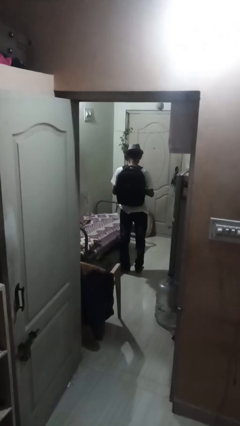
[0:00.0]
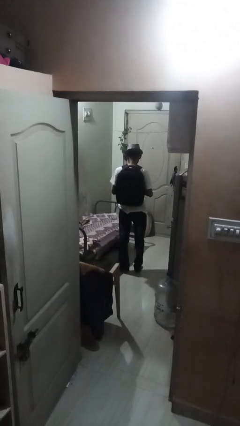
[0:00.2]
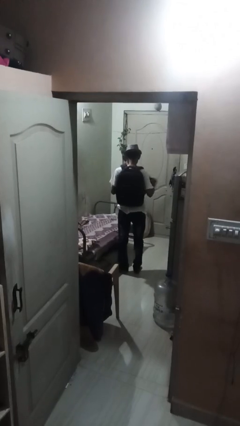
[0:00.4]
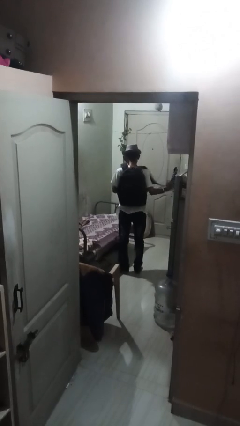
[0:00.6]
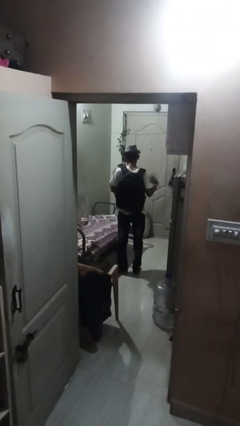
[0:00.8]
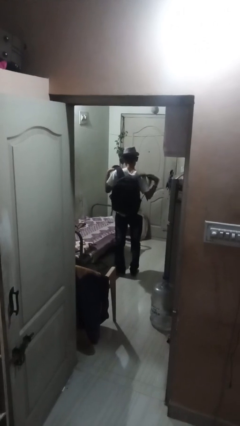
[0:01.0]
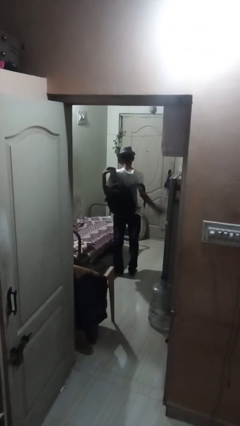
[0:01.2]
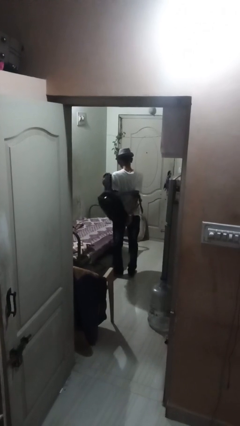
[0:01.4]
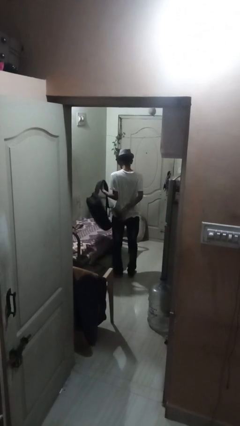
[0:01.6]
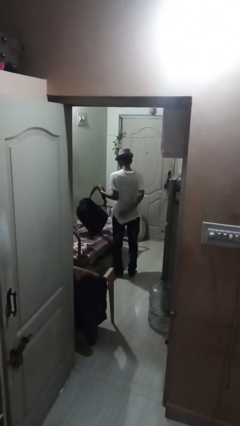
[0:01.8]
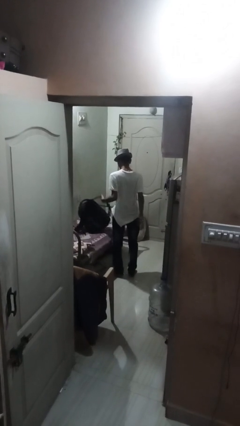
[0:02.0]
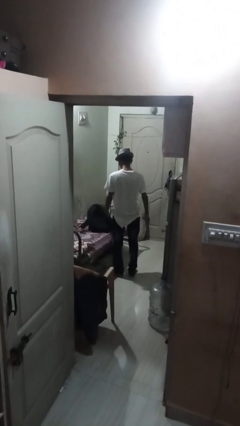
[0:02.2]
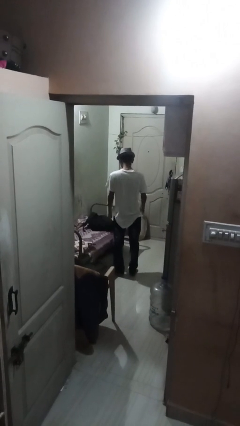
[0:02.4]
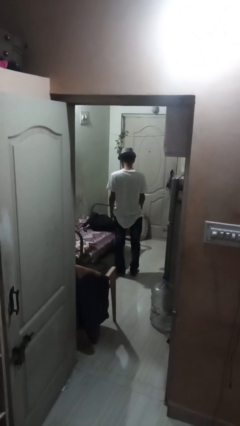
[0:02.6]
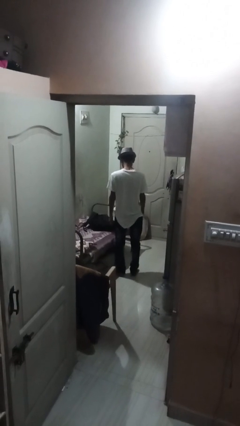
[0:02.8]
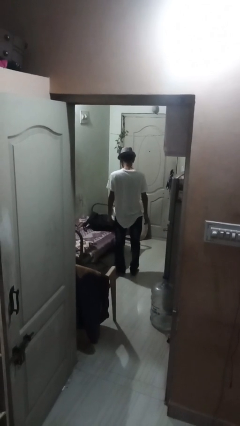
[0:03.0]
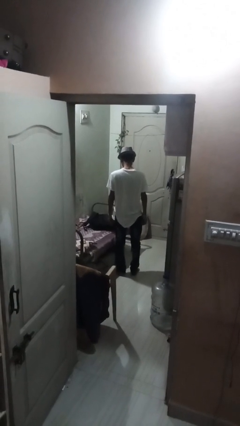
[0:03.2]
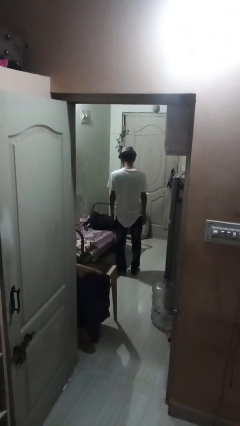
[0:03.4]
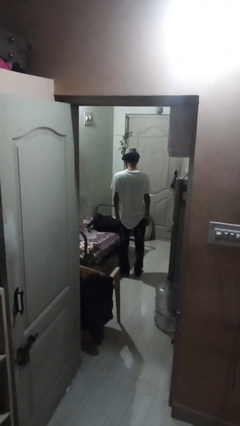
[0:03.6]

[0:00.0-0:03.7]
person takes off backpack

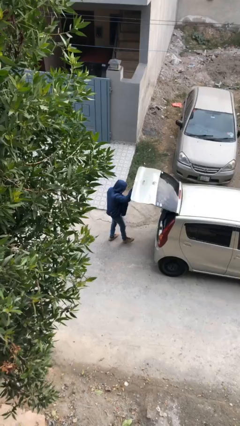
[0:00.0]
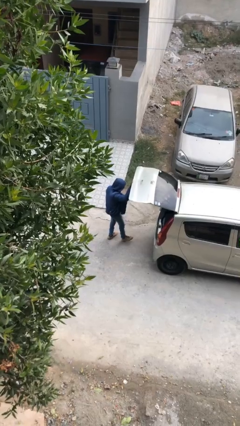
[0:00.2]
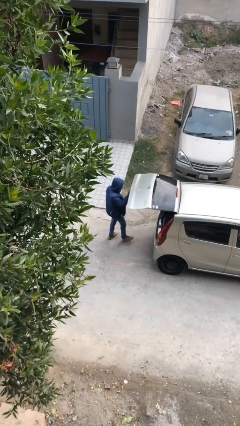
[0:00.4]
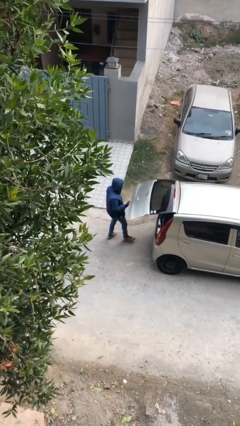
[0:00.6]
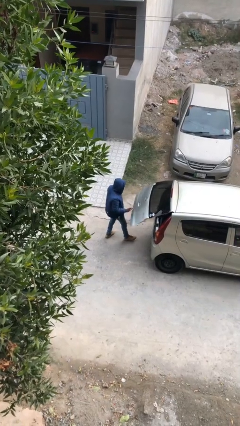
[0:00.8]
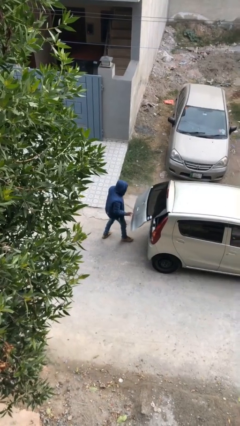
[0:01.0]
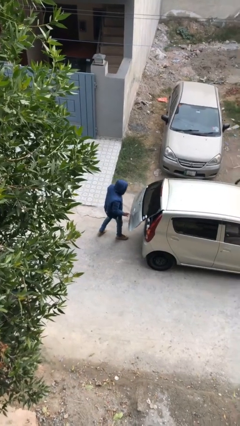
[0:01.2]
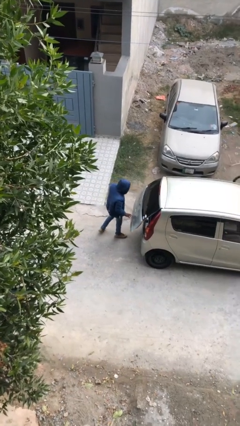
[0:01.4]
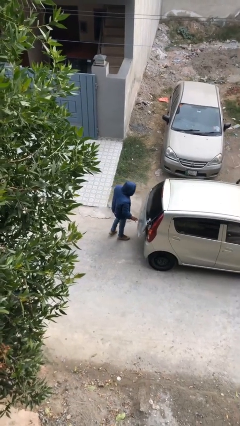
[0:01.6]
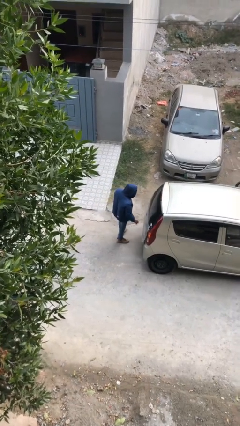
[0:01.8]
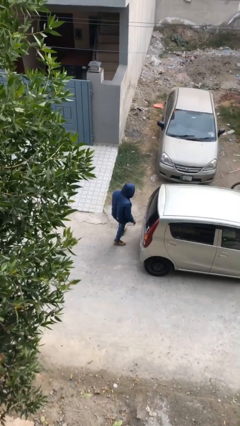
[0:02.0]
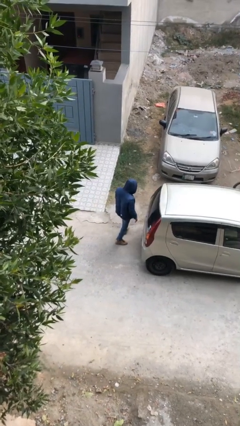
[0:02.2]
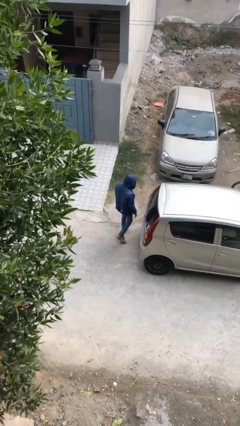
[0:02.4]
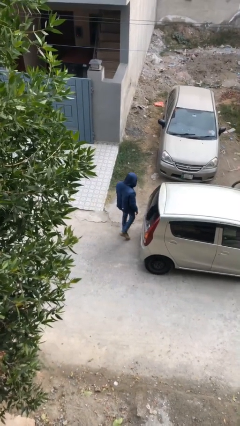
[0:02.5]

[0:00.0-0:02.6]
person closes car trunk

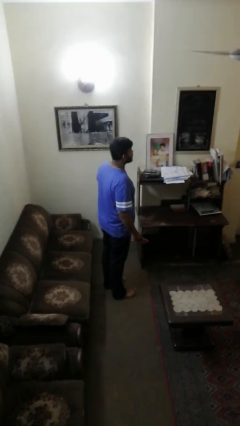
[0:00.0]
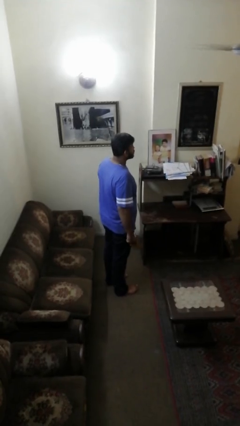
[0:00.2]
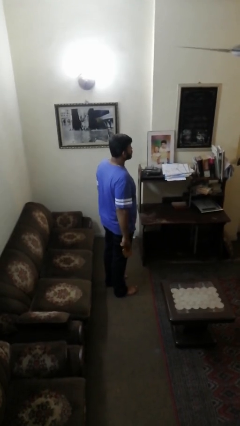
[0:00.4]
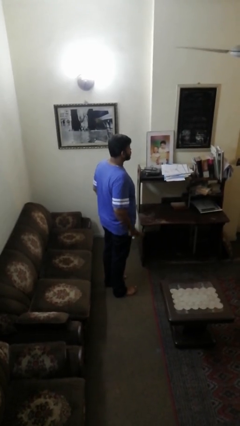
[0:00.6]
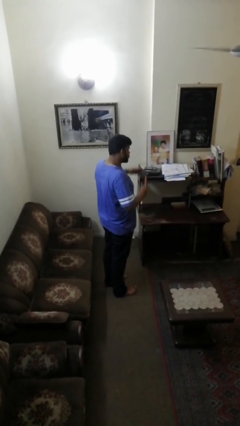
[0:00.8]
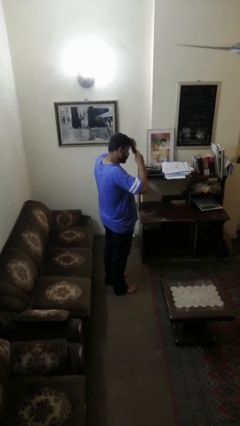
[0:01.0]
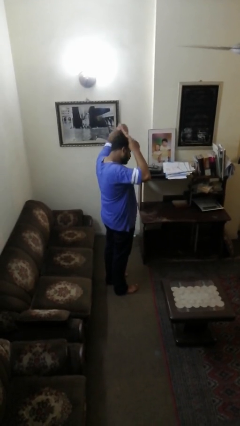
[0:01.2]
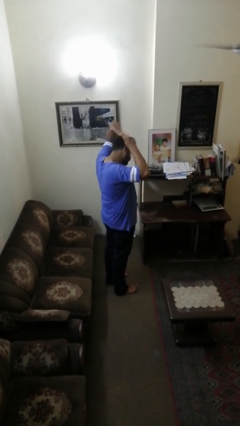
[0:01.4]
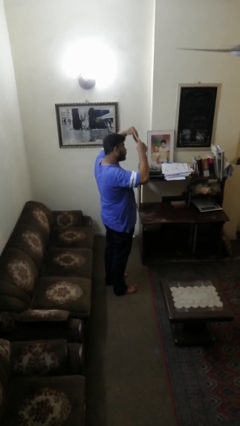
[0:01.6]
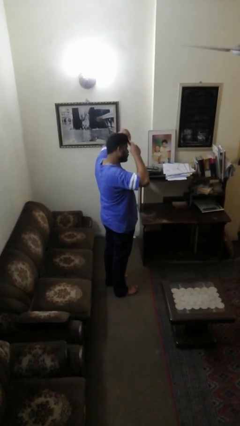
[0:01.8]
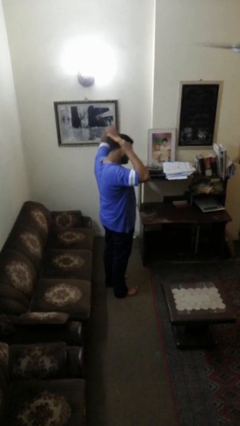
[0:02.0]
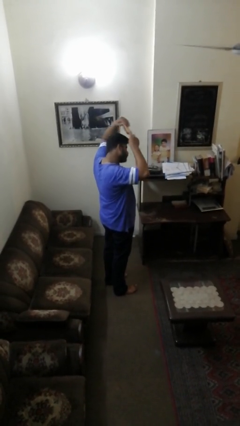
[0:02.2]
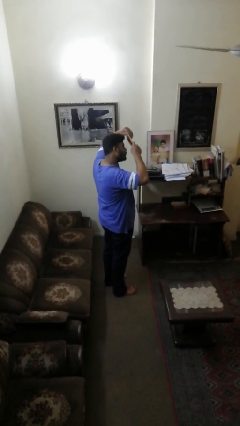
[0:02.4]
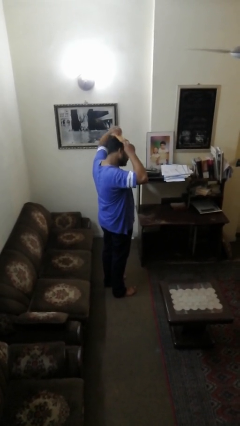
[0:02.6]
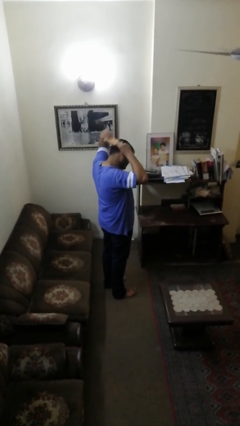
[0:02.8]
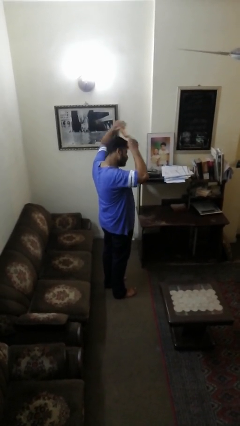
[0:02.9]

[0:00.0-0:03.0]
person brushes hair

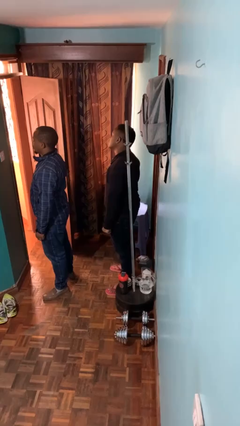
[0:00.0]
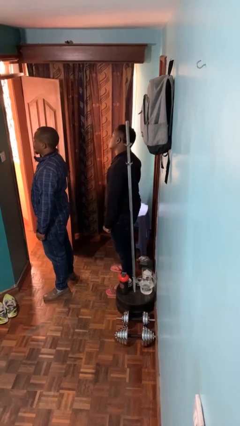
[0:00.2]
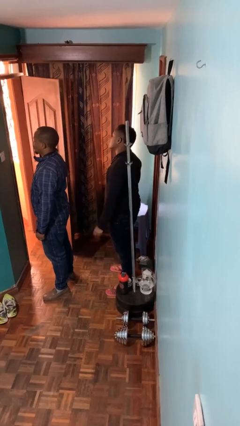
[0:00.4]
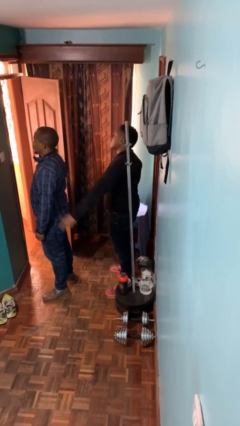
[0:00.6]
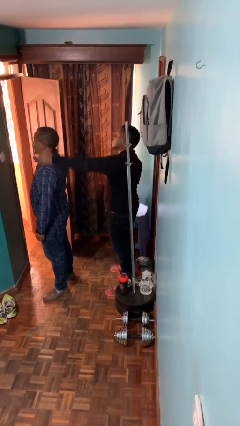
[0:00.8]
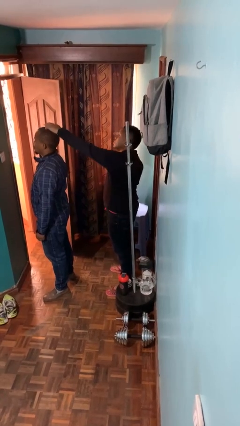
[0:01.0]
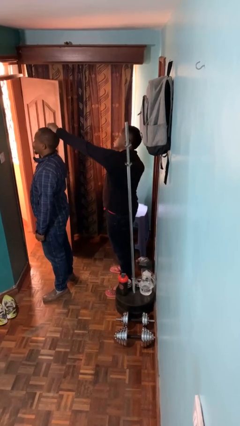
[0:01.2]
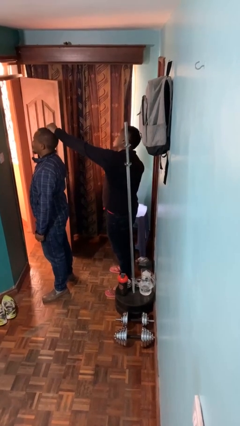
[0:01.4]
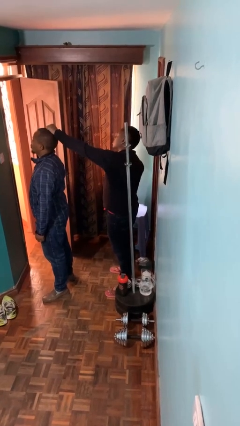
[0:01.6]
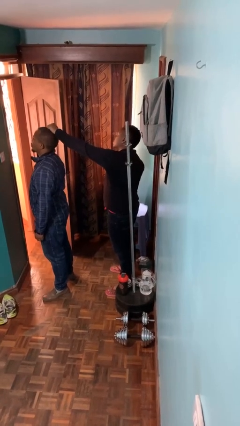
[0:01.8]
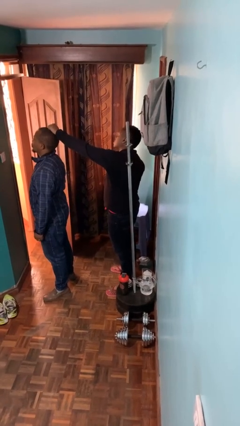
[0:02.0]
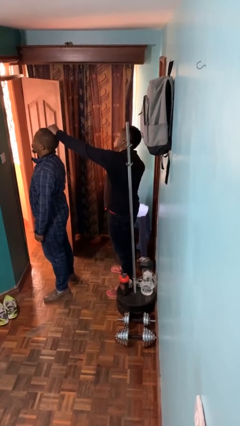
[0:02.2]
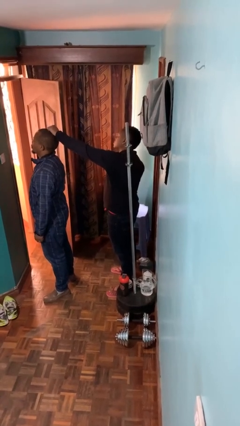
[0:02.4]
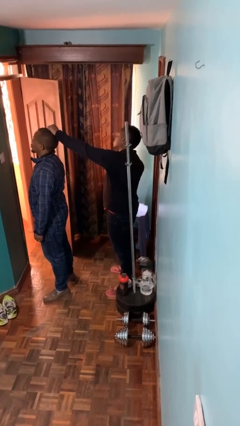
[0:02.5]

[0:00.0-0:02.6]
person grabs person by hair

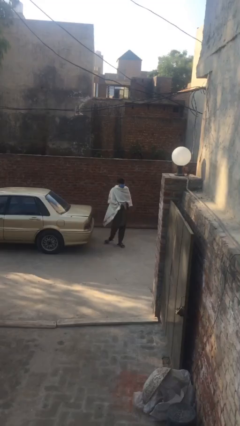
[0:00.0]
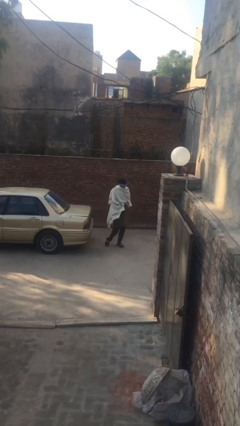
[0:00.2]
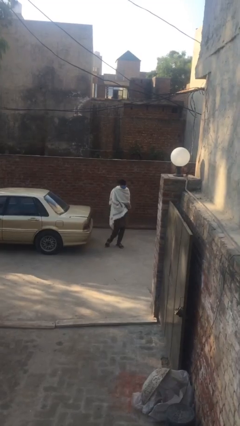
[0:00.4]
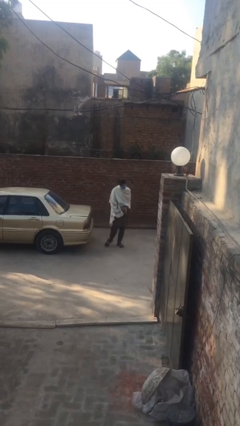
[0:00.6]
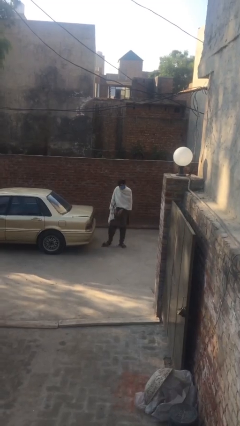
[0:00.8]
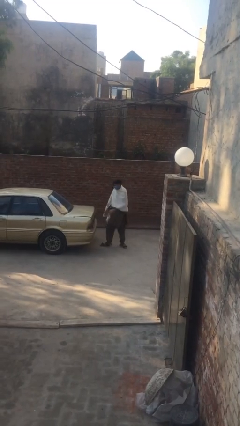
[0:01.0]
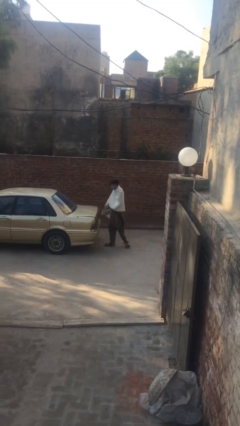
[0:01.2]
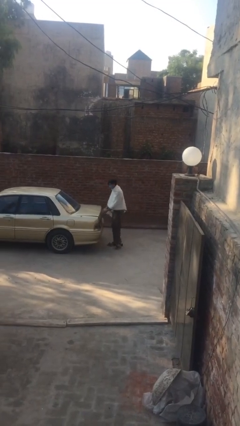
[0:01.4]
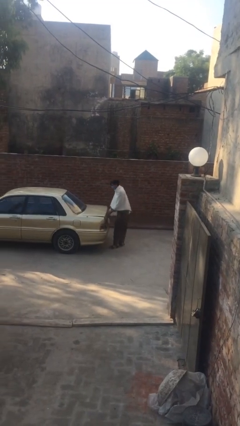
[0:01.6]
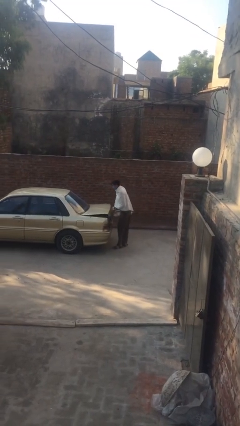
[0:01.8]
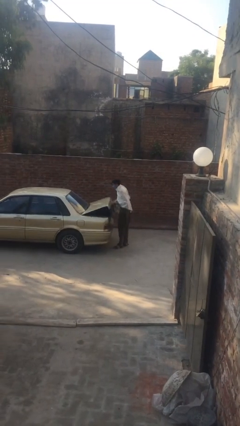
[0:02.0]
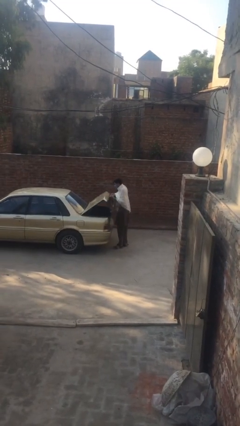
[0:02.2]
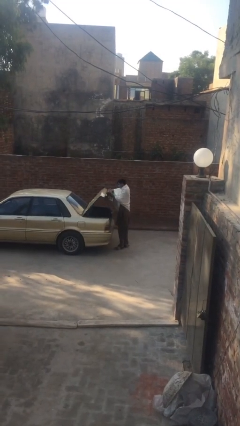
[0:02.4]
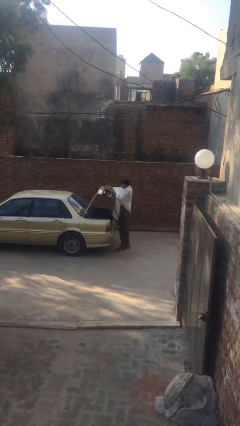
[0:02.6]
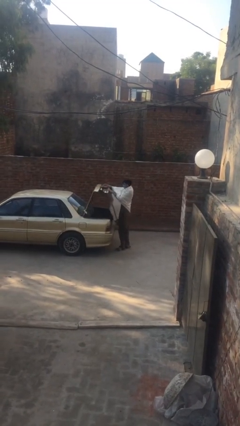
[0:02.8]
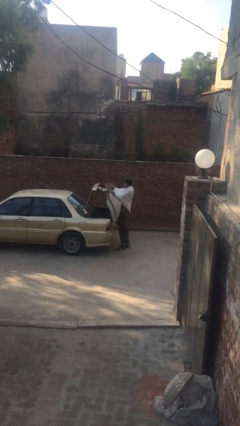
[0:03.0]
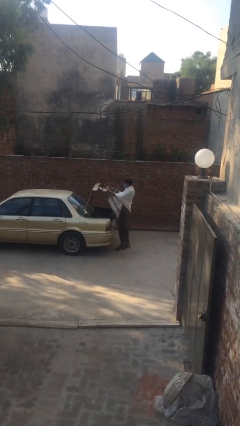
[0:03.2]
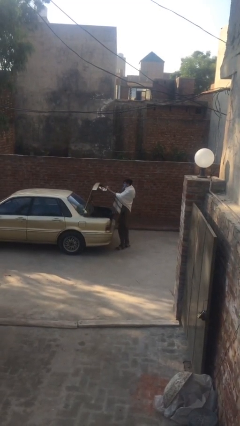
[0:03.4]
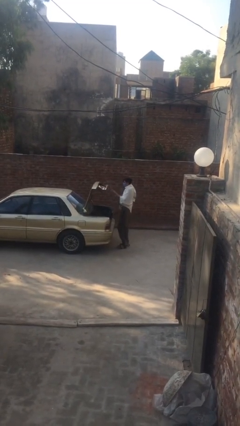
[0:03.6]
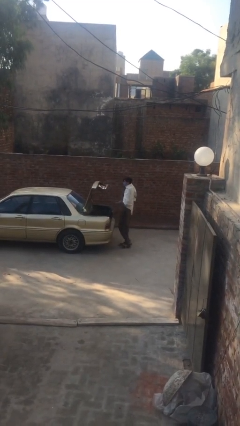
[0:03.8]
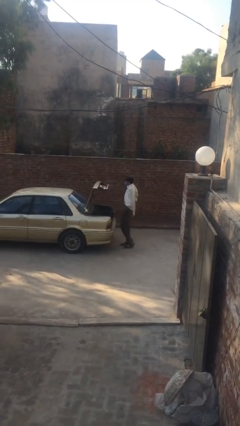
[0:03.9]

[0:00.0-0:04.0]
person opens car trunk

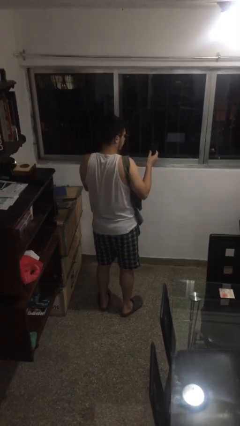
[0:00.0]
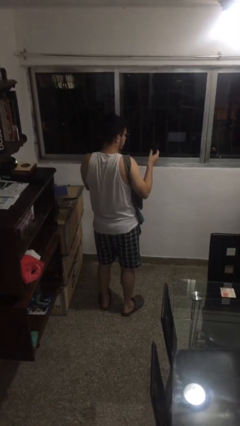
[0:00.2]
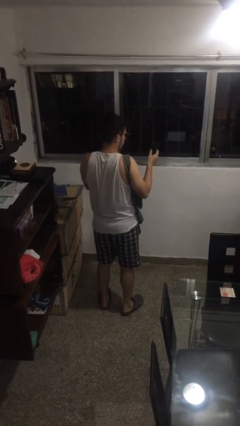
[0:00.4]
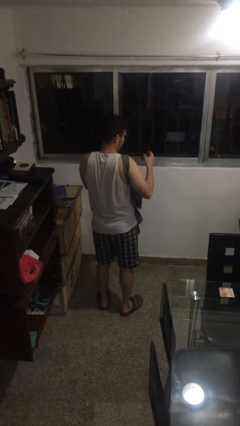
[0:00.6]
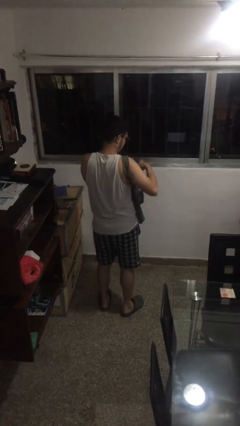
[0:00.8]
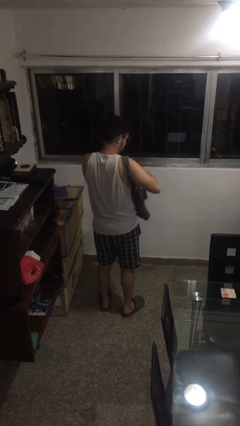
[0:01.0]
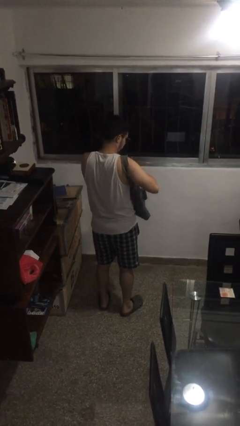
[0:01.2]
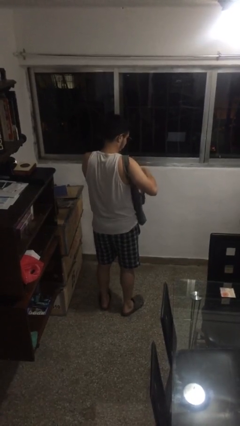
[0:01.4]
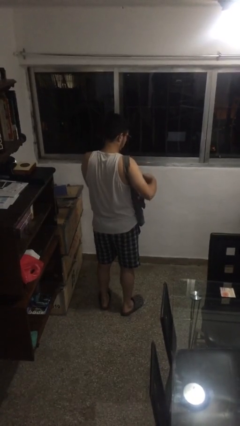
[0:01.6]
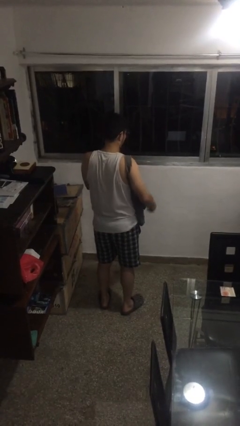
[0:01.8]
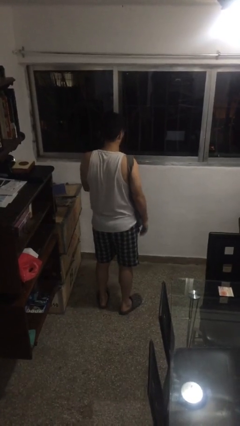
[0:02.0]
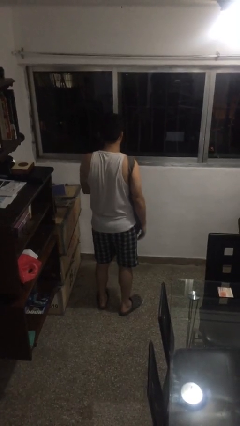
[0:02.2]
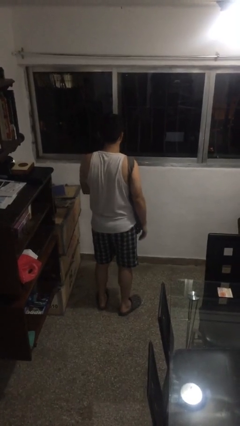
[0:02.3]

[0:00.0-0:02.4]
person puts object into purse
